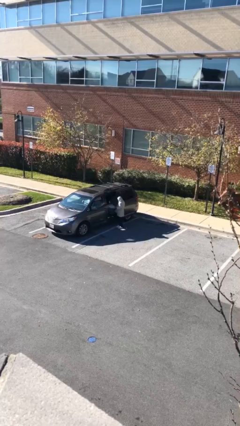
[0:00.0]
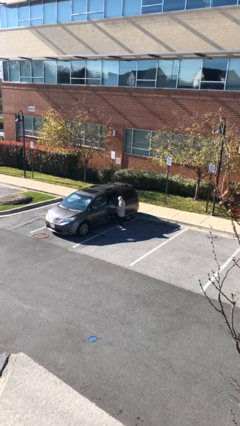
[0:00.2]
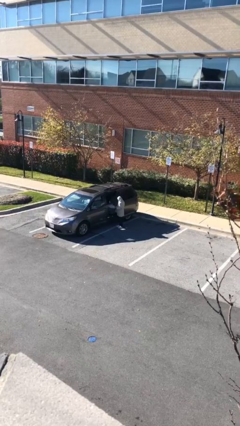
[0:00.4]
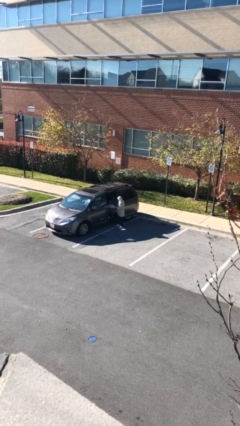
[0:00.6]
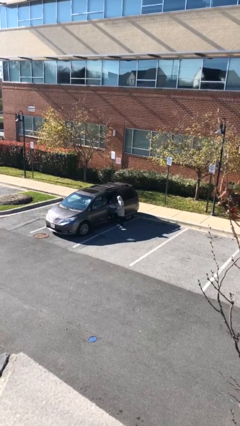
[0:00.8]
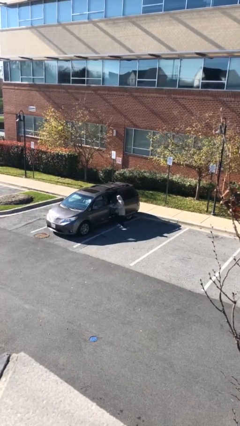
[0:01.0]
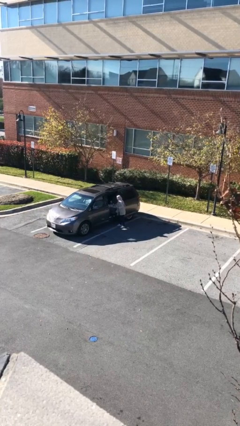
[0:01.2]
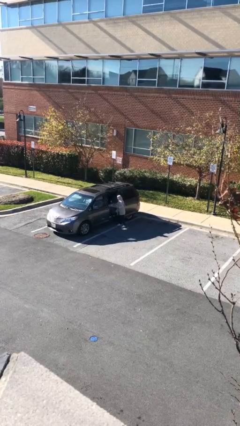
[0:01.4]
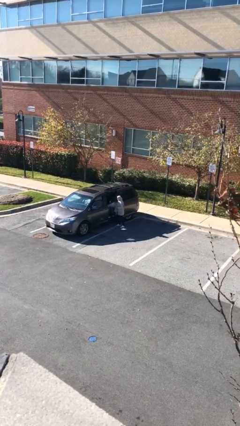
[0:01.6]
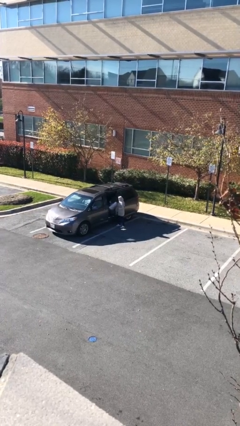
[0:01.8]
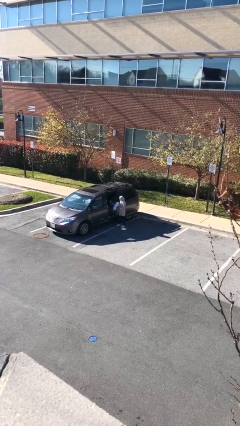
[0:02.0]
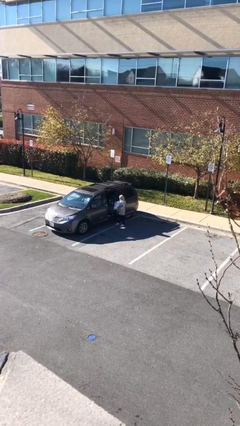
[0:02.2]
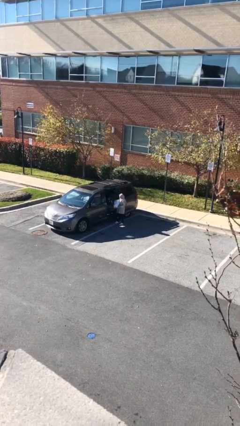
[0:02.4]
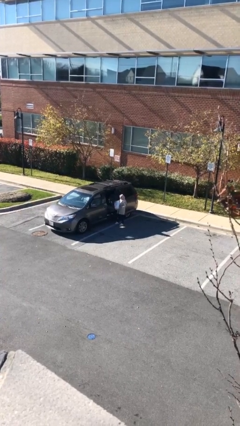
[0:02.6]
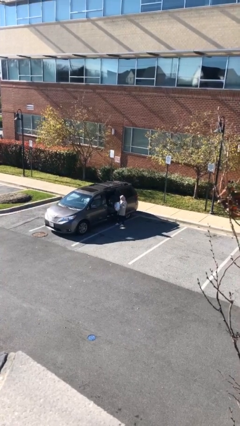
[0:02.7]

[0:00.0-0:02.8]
person unloads car

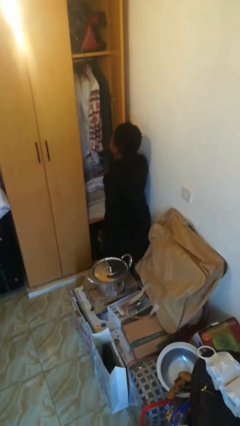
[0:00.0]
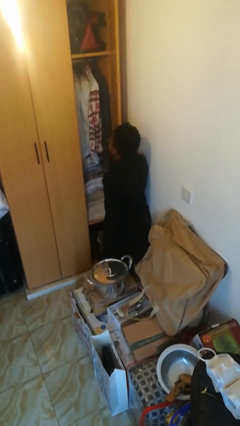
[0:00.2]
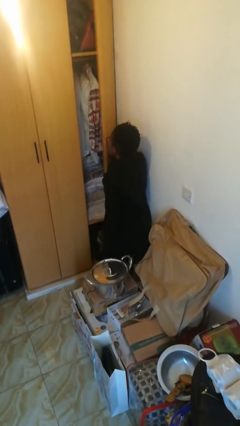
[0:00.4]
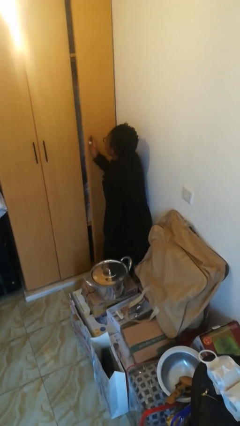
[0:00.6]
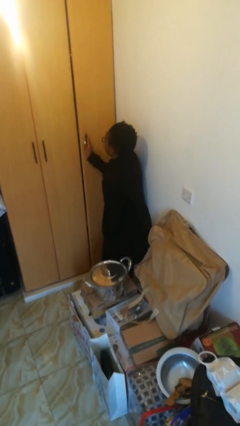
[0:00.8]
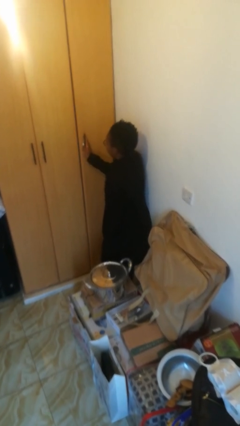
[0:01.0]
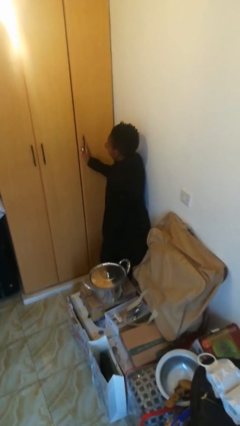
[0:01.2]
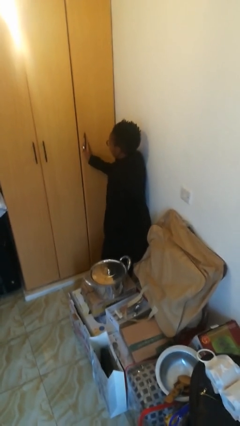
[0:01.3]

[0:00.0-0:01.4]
person closes closet door

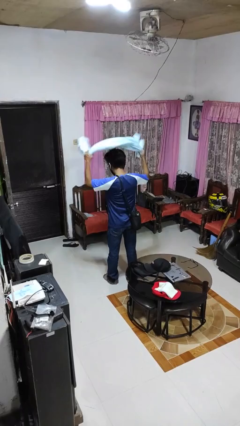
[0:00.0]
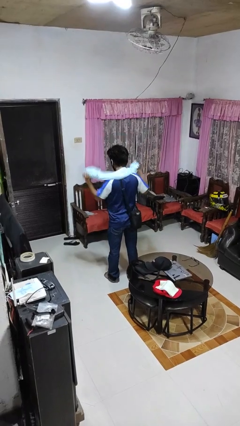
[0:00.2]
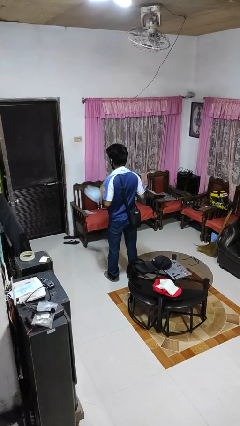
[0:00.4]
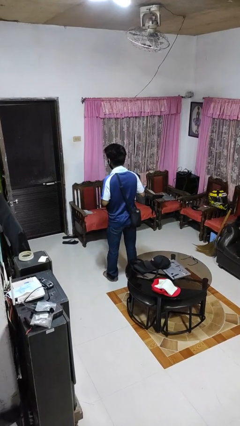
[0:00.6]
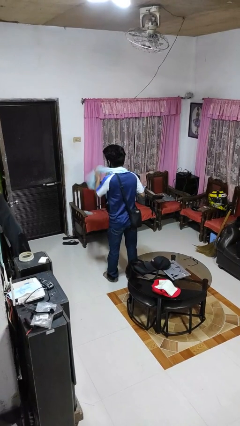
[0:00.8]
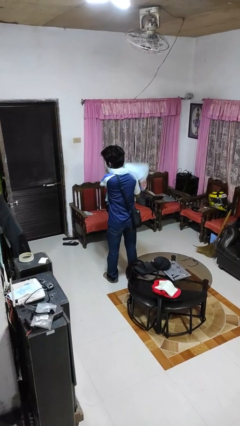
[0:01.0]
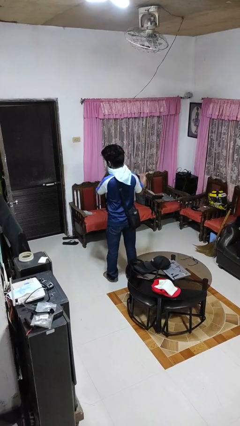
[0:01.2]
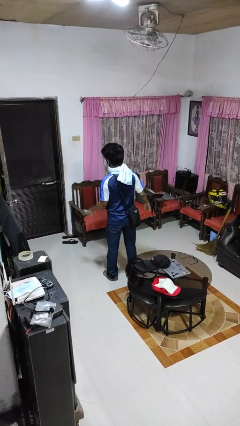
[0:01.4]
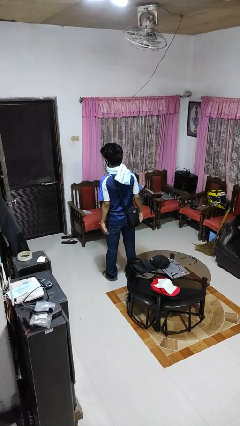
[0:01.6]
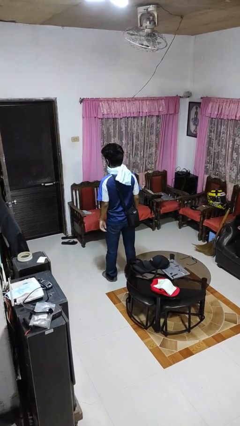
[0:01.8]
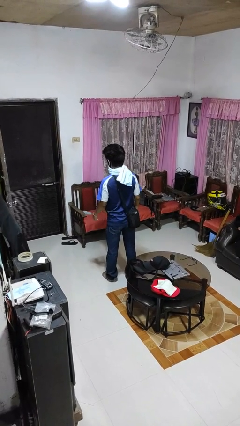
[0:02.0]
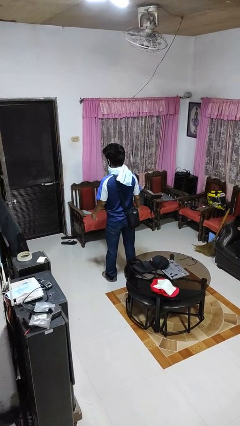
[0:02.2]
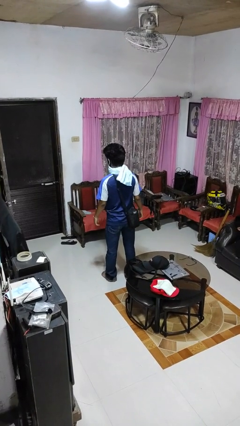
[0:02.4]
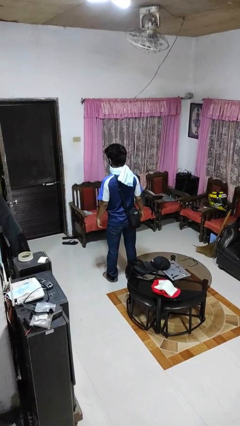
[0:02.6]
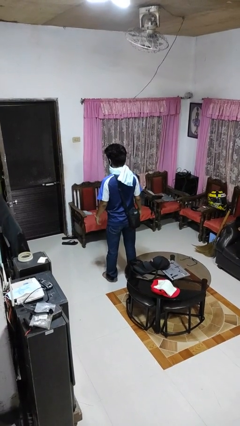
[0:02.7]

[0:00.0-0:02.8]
person puts on scarf

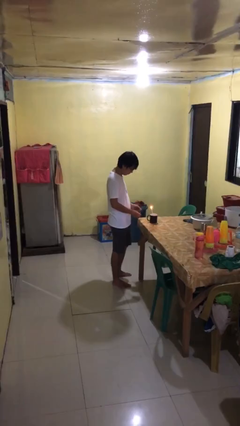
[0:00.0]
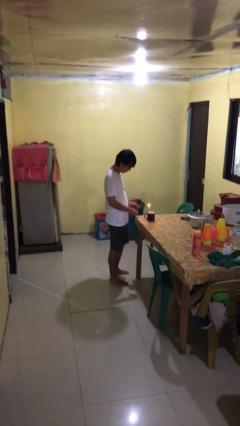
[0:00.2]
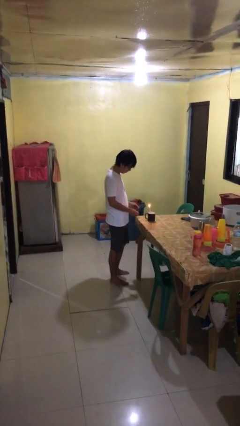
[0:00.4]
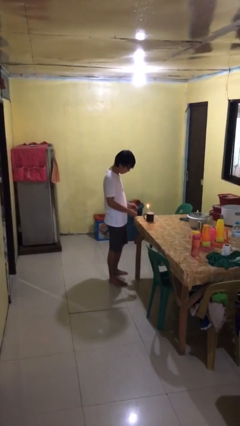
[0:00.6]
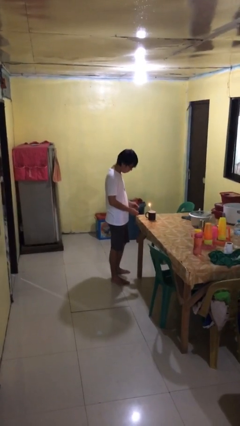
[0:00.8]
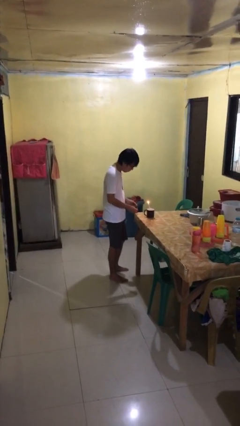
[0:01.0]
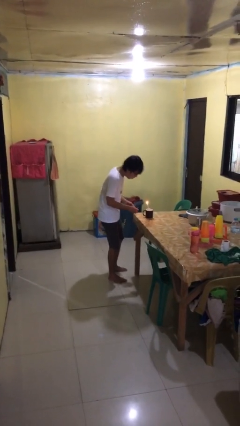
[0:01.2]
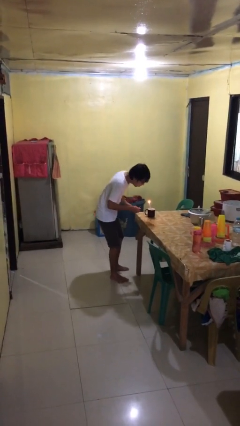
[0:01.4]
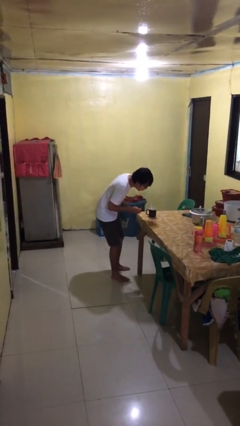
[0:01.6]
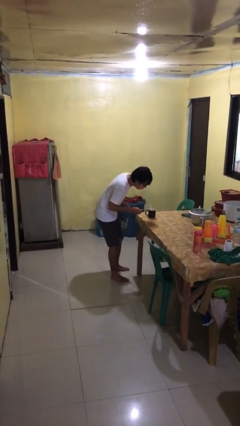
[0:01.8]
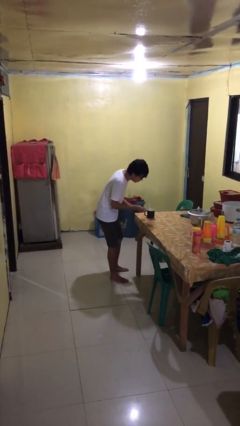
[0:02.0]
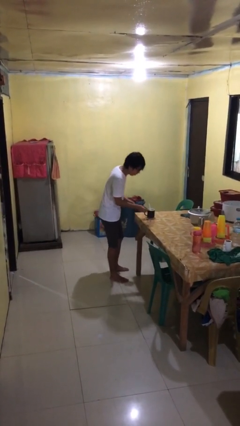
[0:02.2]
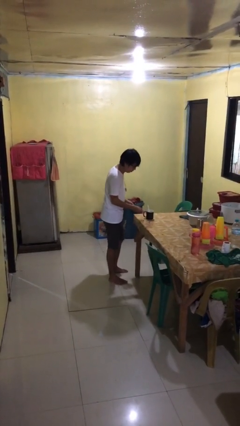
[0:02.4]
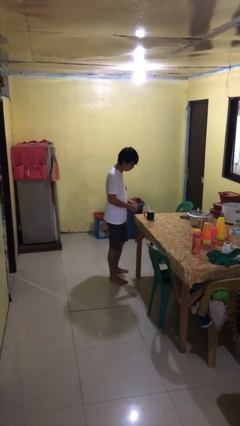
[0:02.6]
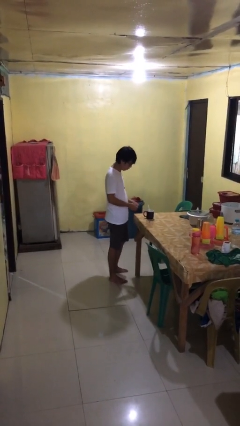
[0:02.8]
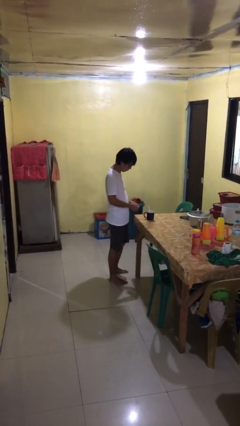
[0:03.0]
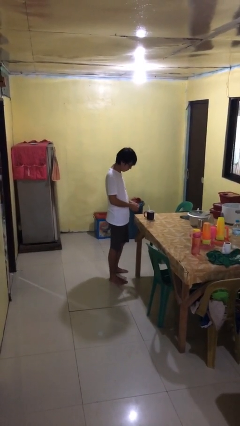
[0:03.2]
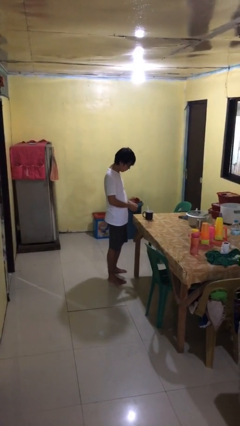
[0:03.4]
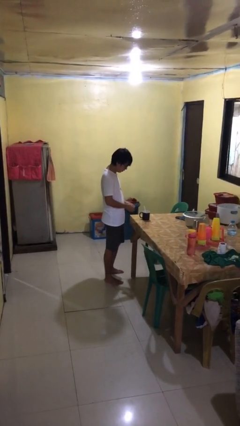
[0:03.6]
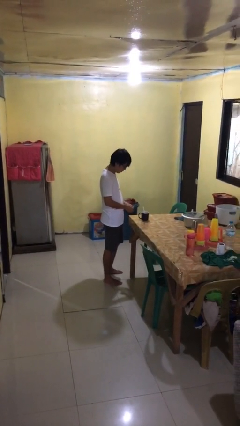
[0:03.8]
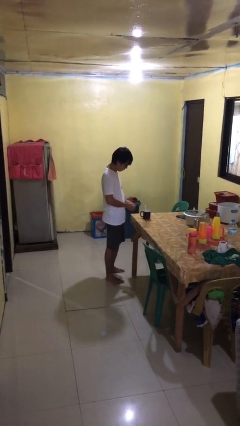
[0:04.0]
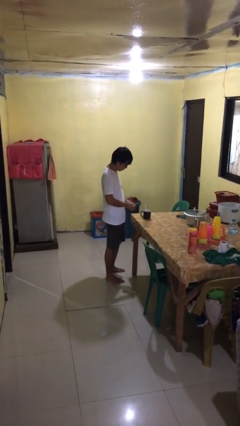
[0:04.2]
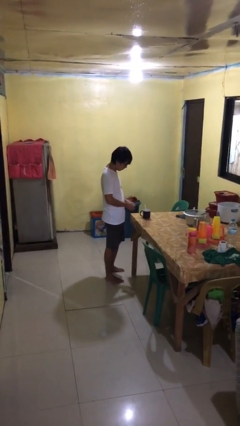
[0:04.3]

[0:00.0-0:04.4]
person extinguishes candle

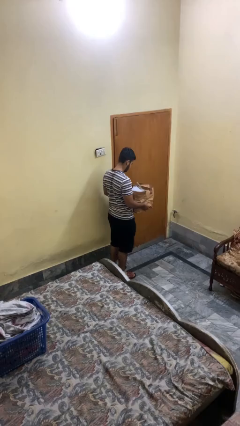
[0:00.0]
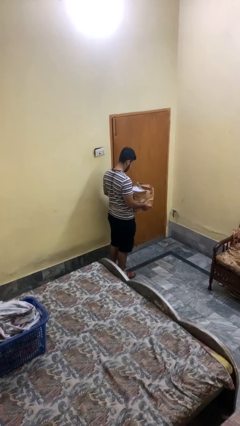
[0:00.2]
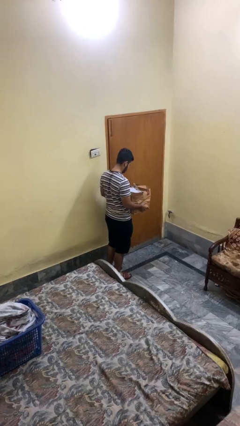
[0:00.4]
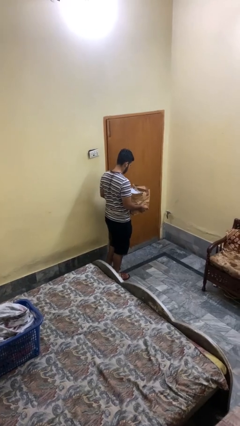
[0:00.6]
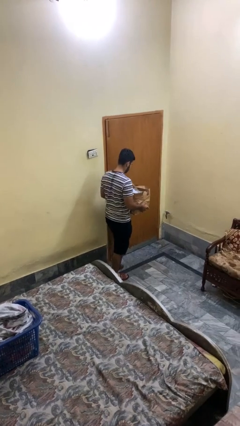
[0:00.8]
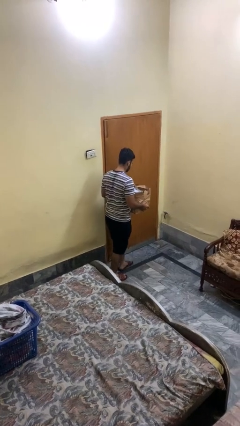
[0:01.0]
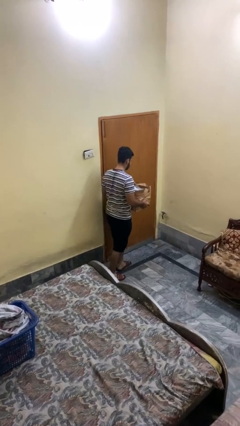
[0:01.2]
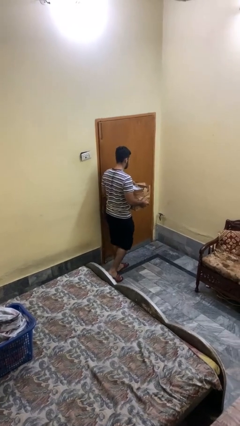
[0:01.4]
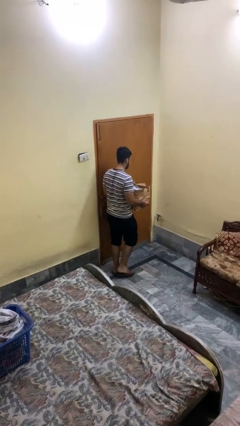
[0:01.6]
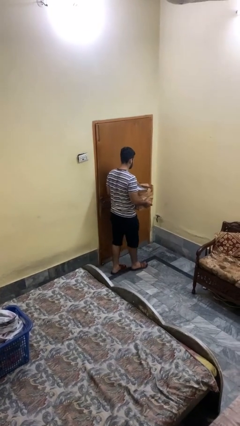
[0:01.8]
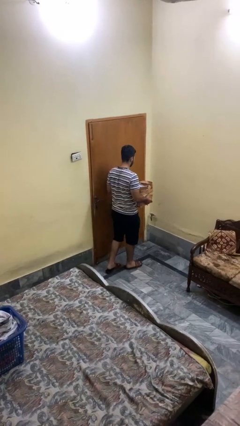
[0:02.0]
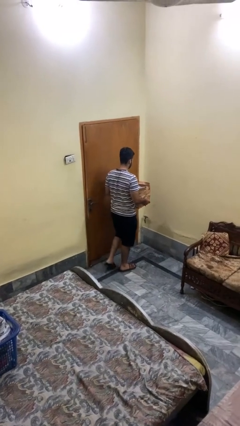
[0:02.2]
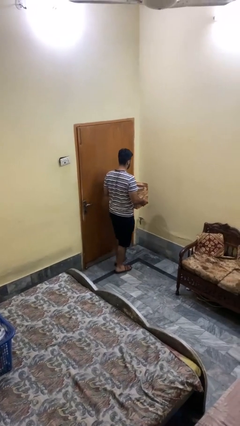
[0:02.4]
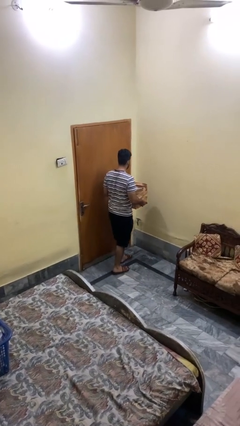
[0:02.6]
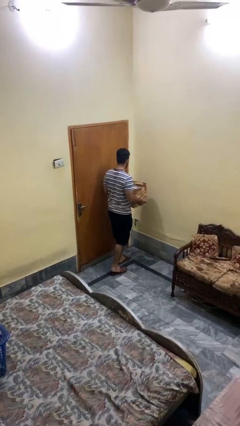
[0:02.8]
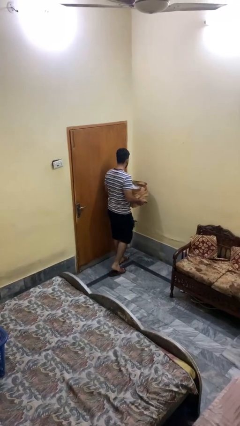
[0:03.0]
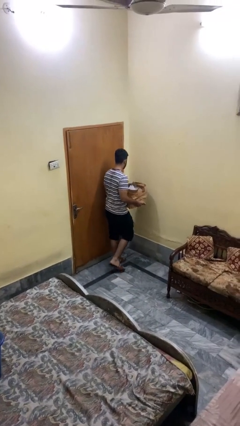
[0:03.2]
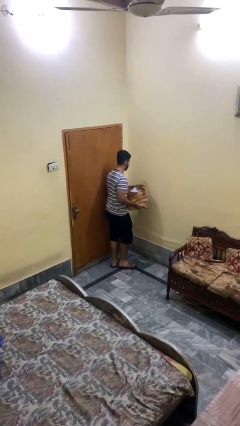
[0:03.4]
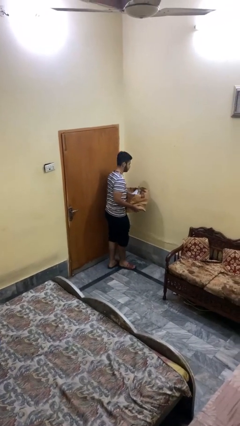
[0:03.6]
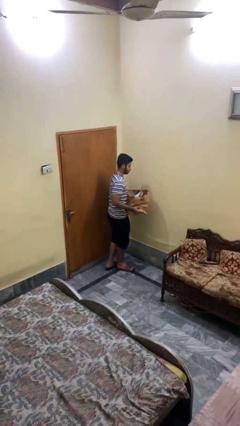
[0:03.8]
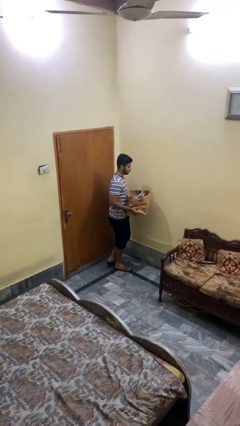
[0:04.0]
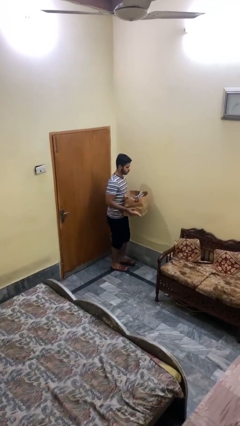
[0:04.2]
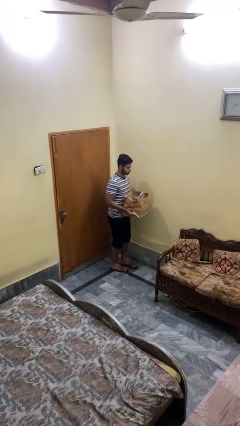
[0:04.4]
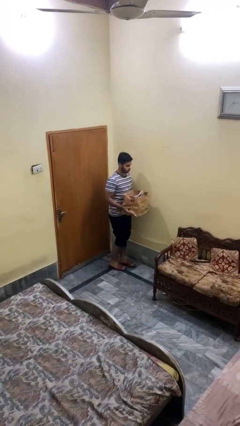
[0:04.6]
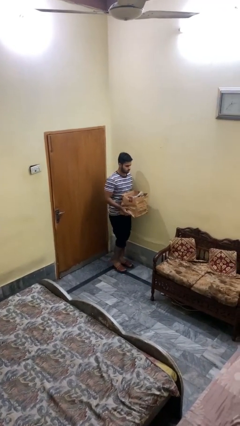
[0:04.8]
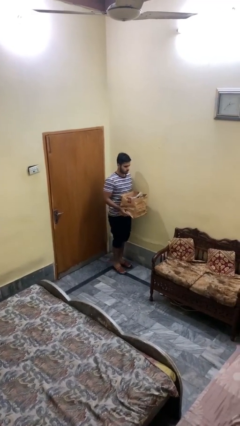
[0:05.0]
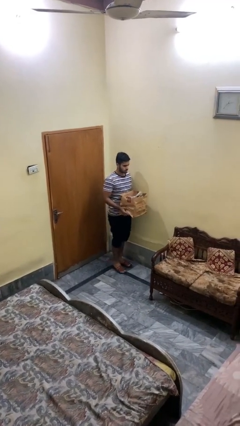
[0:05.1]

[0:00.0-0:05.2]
person carries groceries

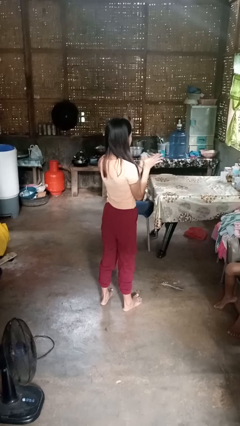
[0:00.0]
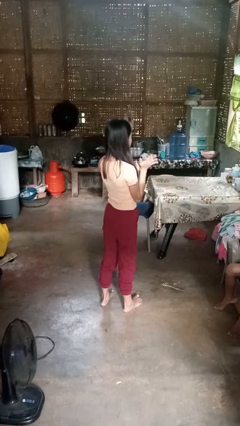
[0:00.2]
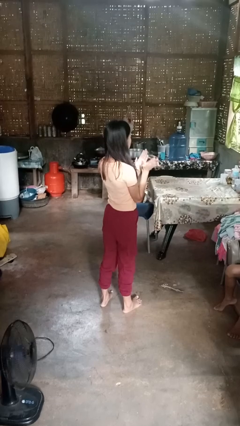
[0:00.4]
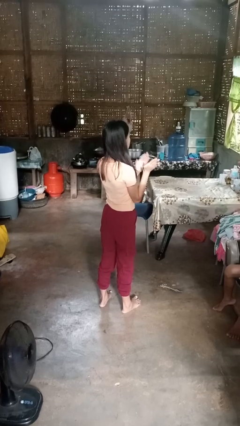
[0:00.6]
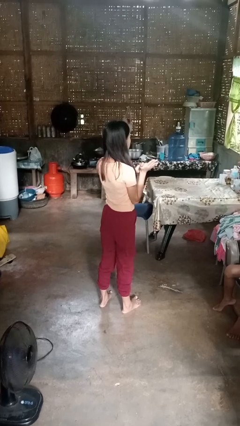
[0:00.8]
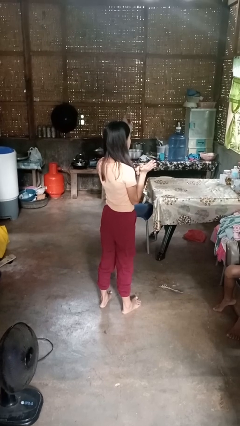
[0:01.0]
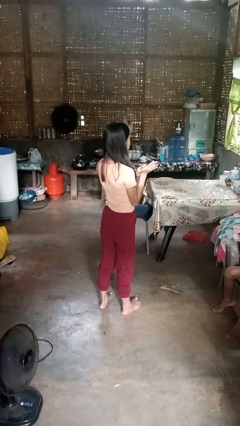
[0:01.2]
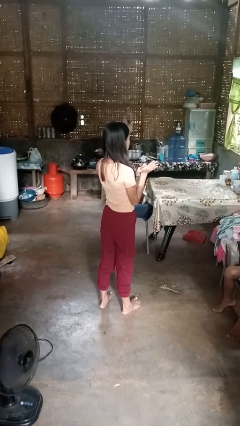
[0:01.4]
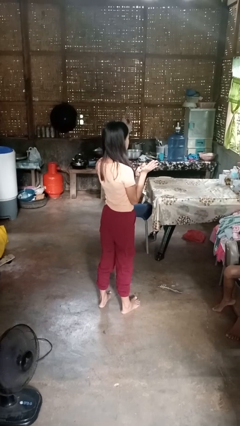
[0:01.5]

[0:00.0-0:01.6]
person claps hands
